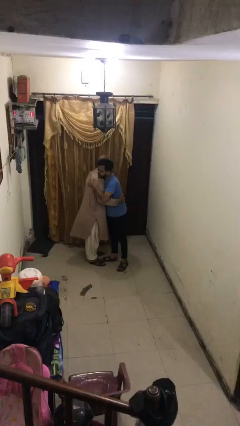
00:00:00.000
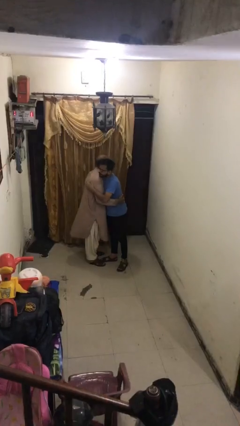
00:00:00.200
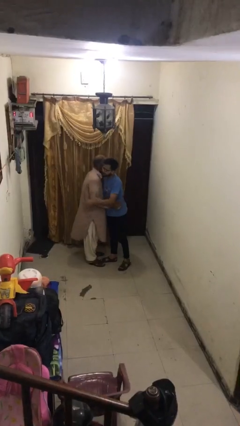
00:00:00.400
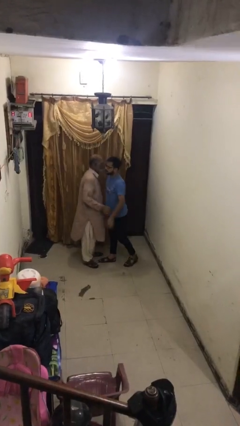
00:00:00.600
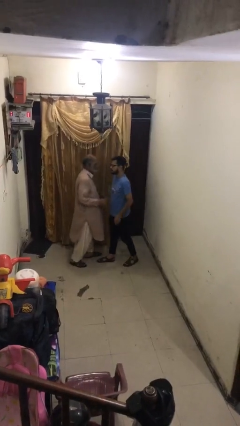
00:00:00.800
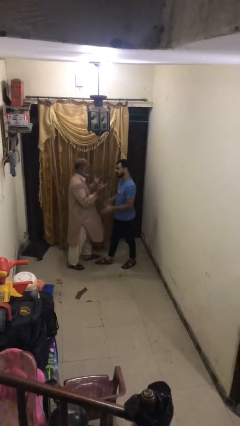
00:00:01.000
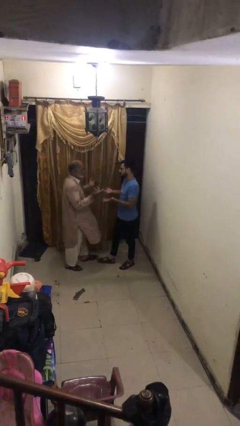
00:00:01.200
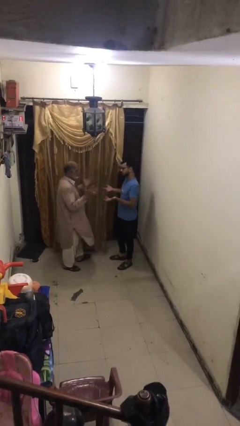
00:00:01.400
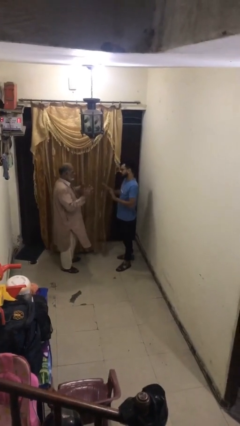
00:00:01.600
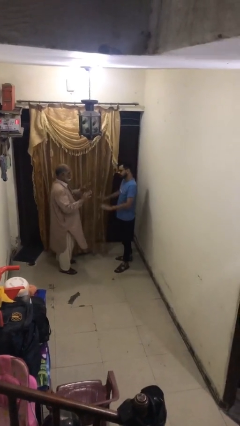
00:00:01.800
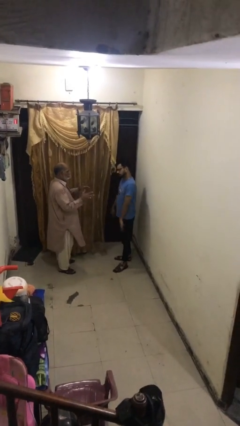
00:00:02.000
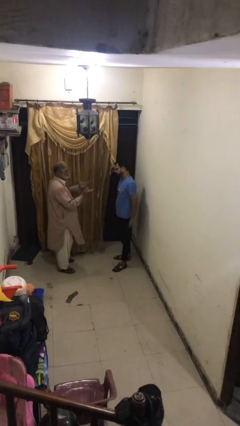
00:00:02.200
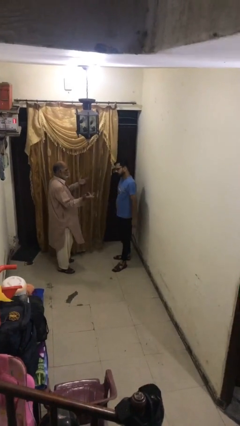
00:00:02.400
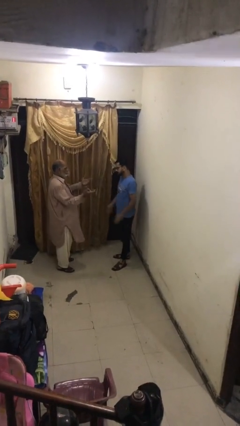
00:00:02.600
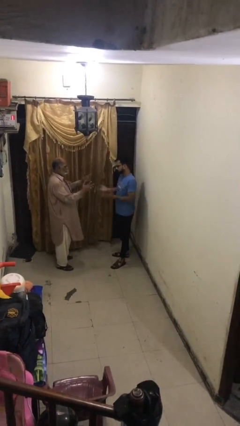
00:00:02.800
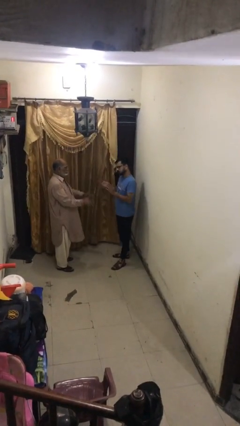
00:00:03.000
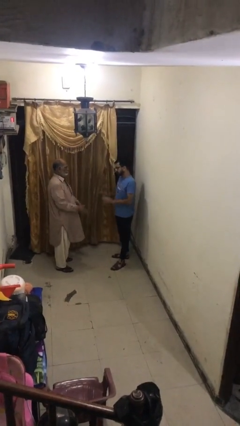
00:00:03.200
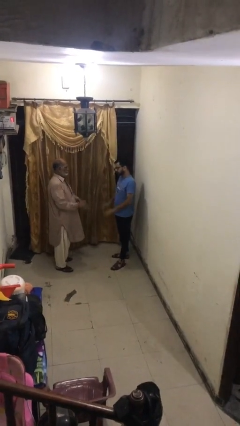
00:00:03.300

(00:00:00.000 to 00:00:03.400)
person talks to person

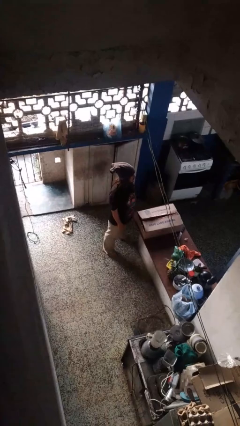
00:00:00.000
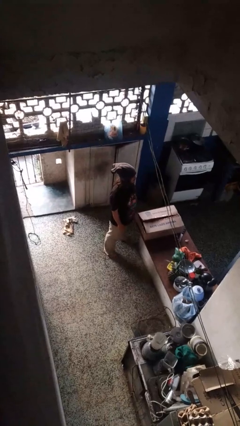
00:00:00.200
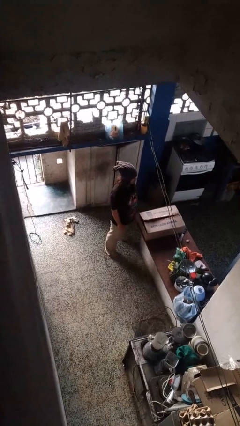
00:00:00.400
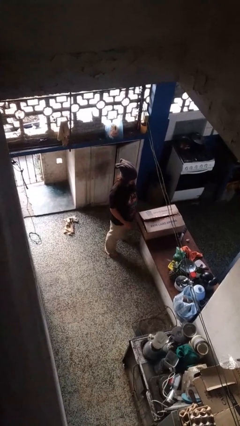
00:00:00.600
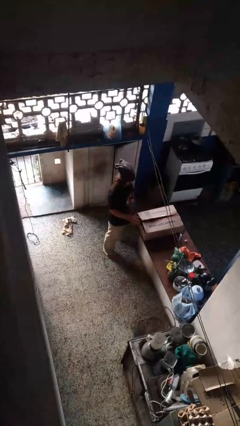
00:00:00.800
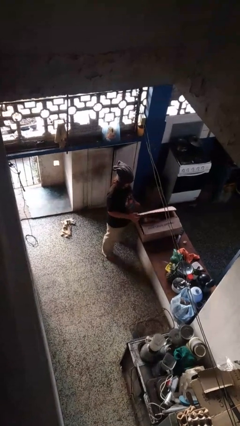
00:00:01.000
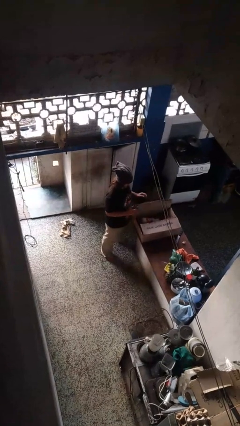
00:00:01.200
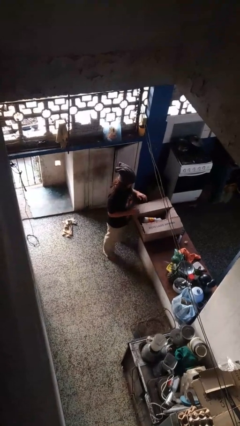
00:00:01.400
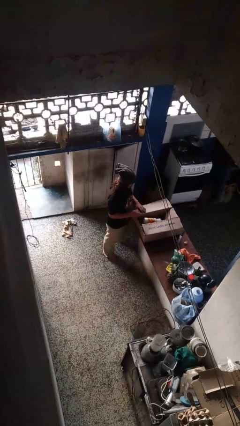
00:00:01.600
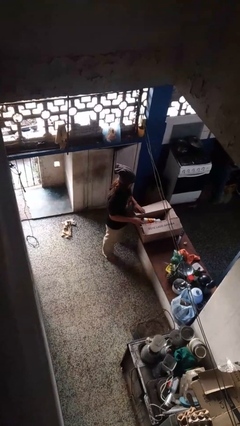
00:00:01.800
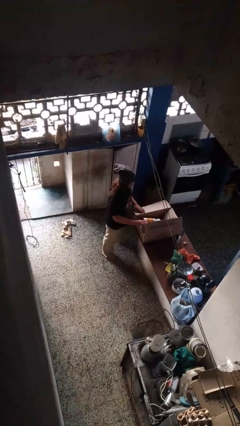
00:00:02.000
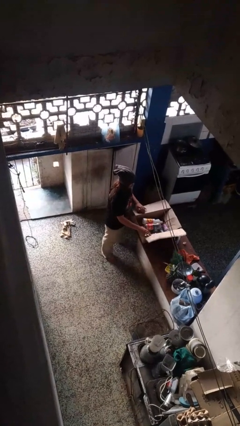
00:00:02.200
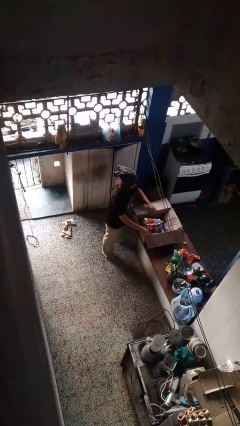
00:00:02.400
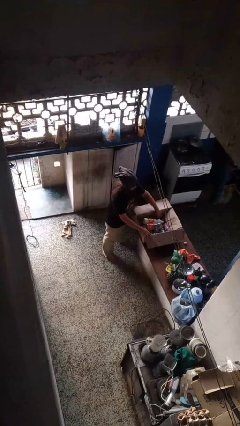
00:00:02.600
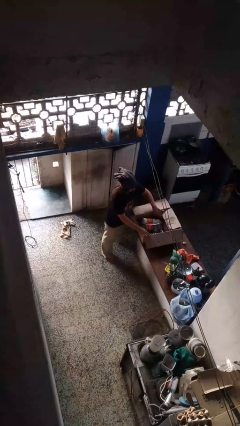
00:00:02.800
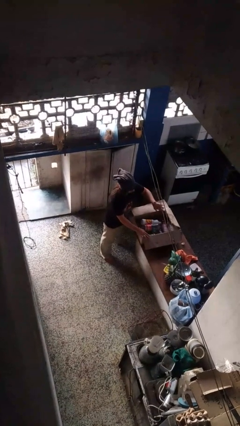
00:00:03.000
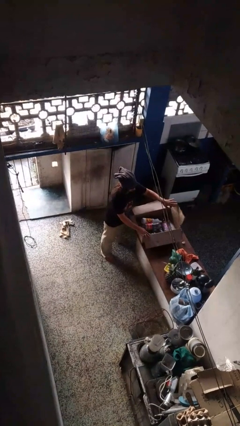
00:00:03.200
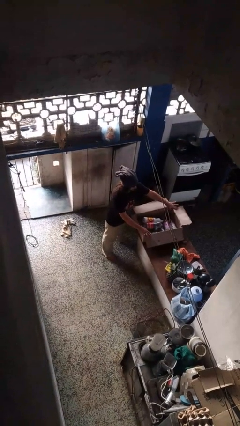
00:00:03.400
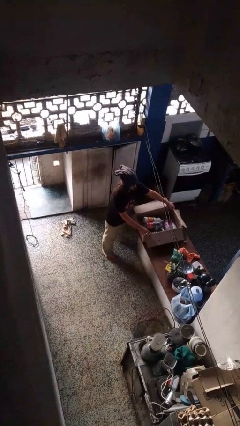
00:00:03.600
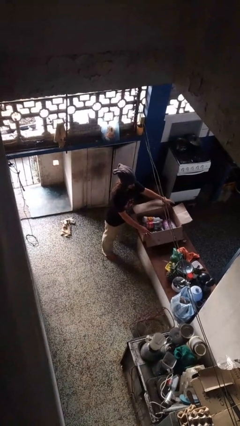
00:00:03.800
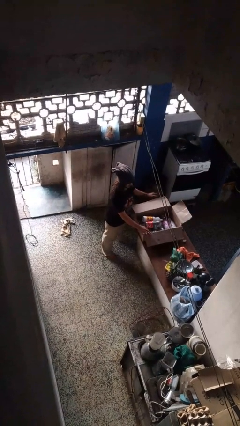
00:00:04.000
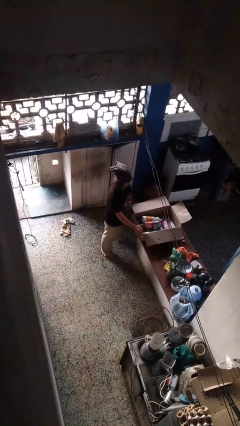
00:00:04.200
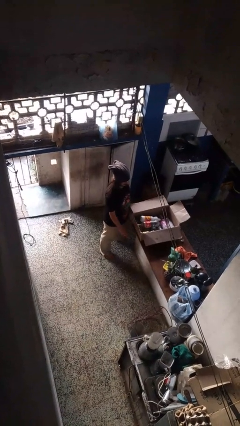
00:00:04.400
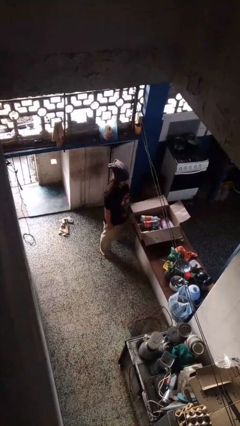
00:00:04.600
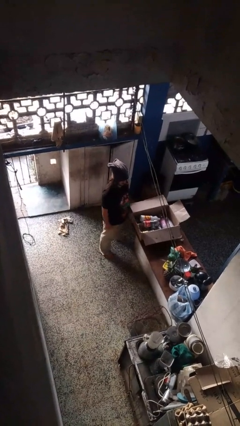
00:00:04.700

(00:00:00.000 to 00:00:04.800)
person opens box

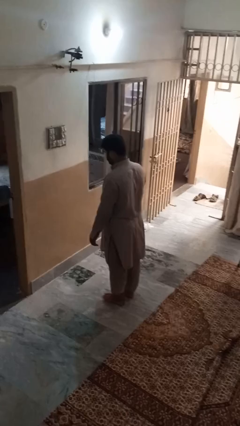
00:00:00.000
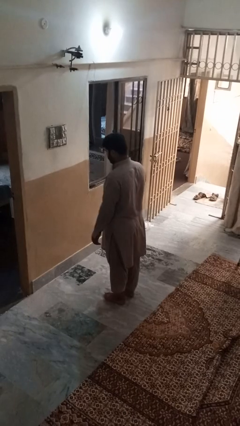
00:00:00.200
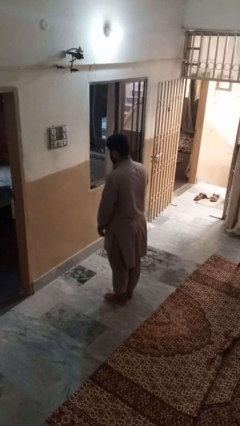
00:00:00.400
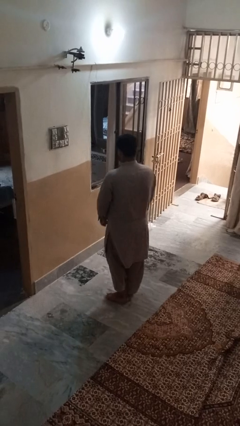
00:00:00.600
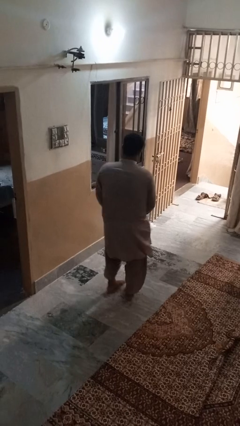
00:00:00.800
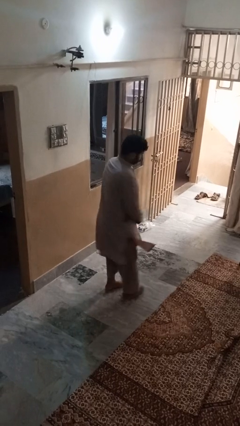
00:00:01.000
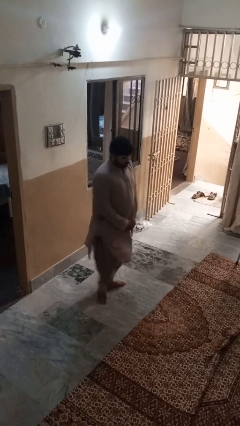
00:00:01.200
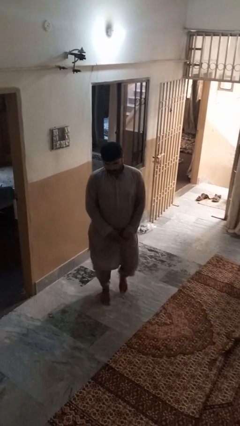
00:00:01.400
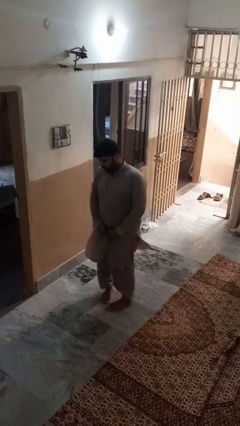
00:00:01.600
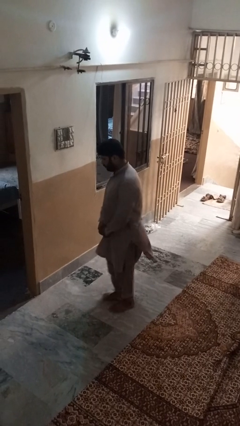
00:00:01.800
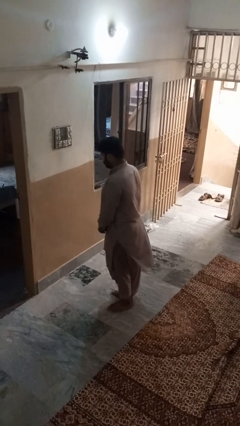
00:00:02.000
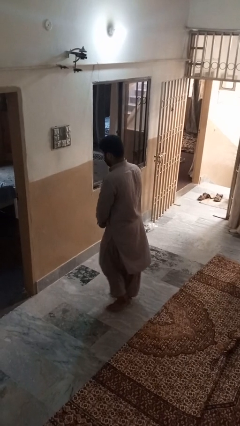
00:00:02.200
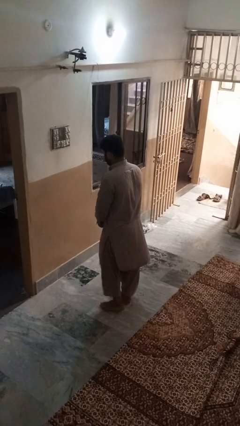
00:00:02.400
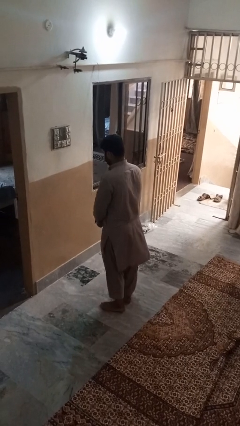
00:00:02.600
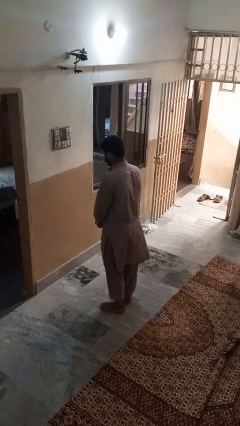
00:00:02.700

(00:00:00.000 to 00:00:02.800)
person twirls

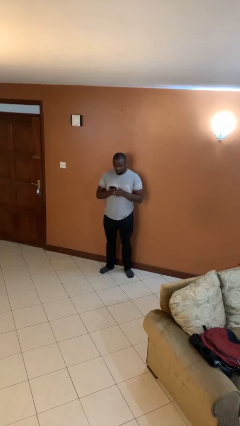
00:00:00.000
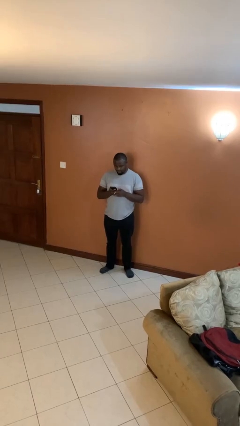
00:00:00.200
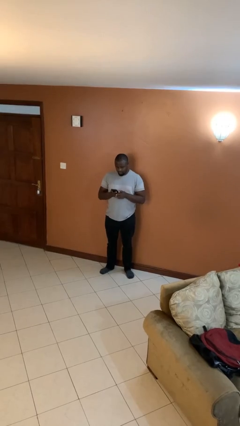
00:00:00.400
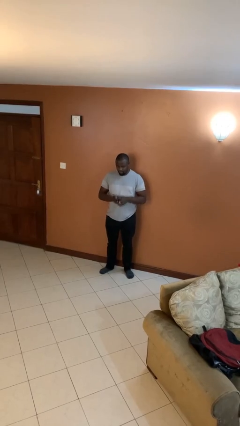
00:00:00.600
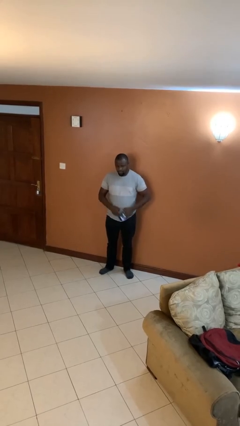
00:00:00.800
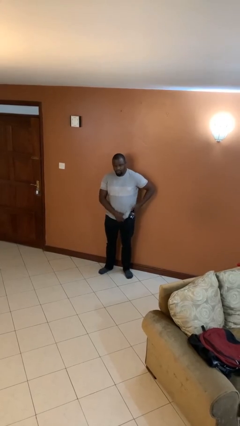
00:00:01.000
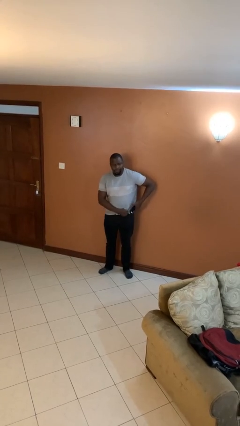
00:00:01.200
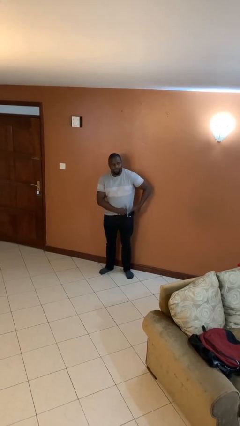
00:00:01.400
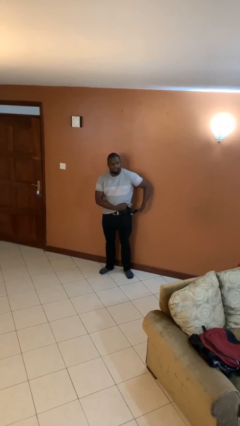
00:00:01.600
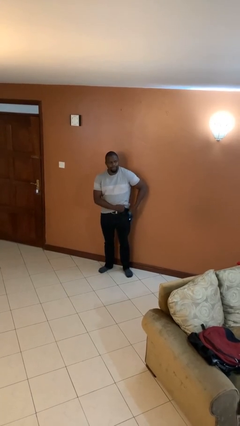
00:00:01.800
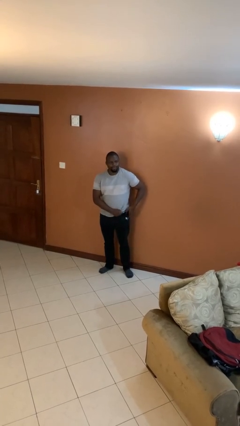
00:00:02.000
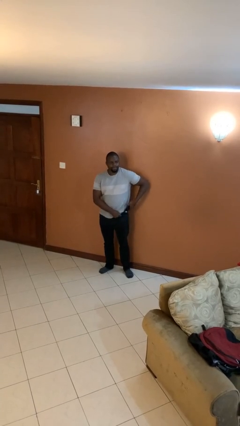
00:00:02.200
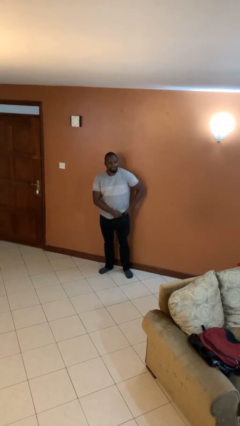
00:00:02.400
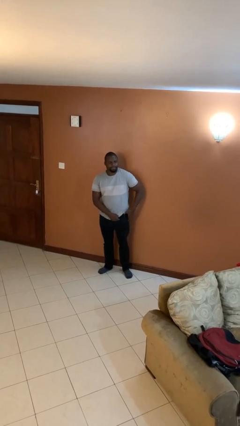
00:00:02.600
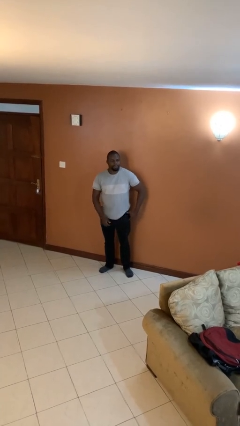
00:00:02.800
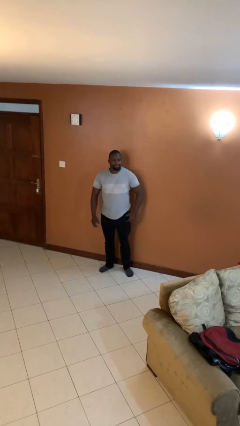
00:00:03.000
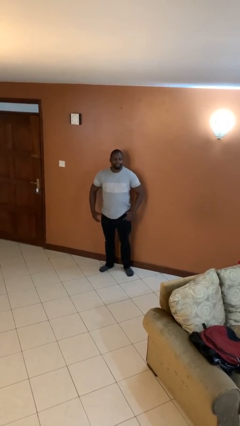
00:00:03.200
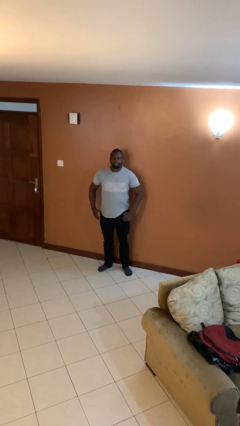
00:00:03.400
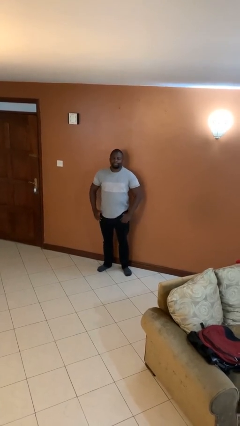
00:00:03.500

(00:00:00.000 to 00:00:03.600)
person puts phone into pocket

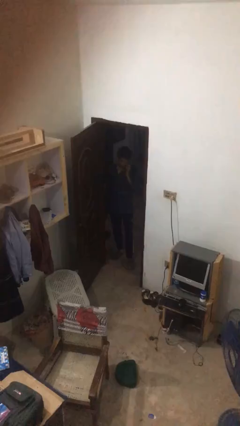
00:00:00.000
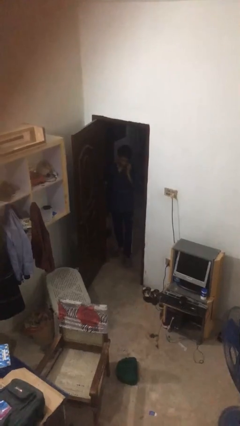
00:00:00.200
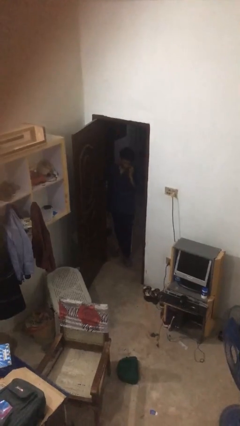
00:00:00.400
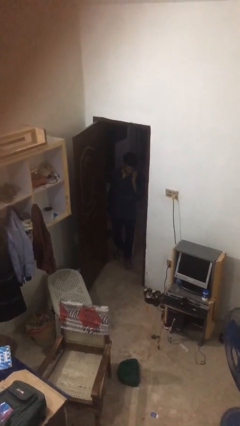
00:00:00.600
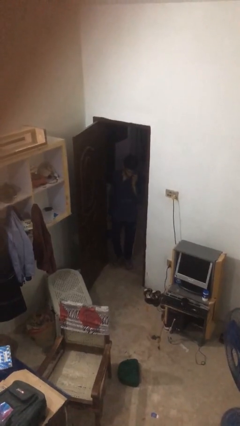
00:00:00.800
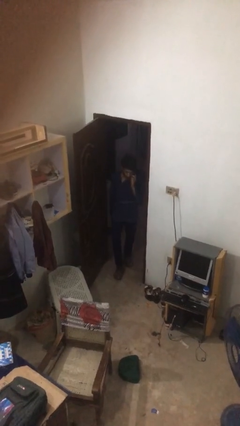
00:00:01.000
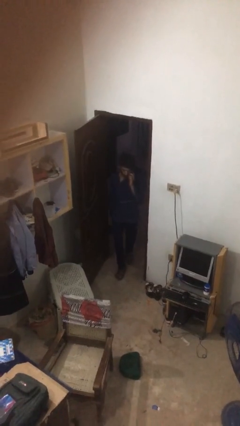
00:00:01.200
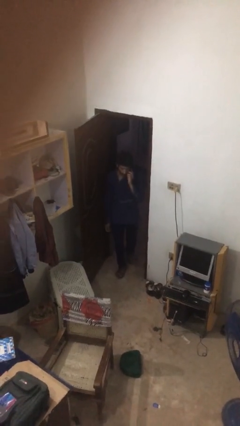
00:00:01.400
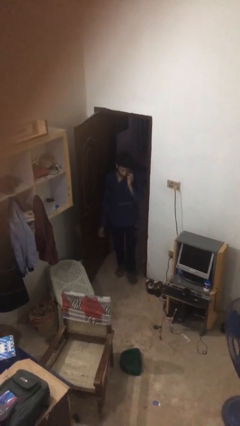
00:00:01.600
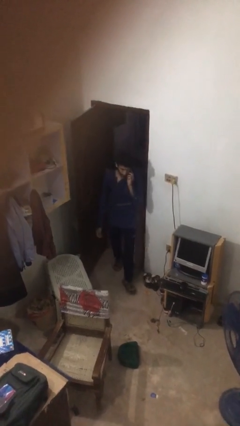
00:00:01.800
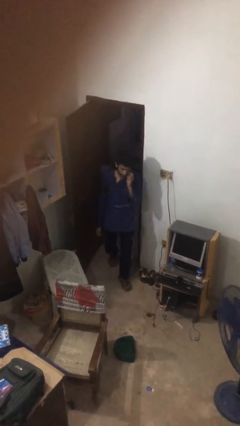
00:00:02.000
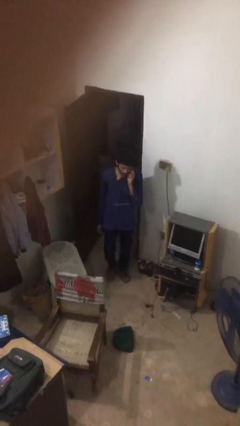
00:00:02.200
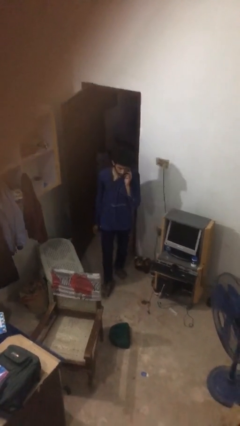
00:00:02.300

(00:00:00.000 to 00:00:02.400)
person enters scene through structure

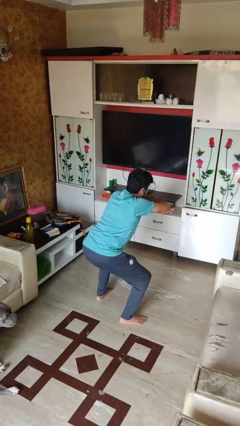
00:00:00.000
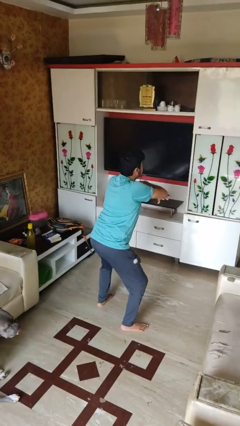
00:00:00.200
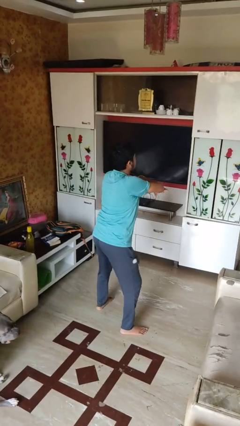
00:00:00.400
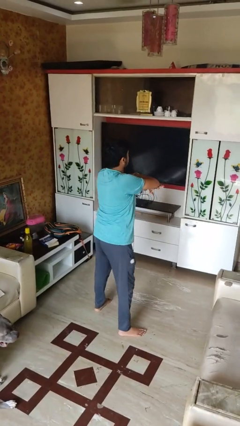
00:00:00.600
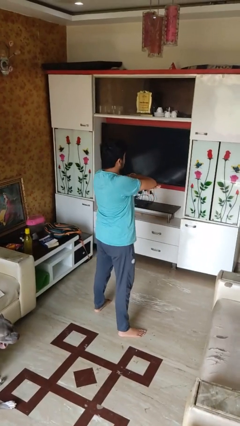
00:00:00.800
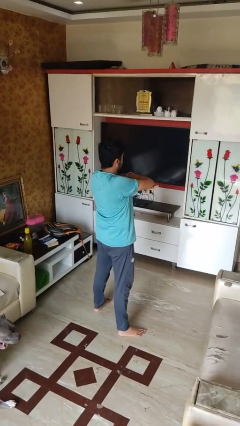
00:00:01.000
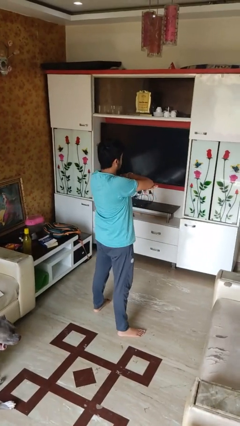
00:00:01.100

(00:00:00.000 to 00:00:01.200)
person stands up
